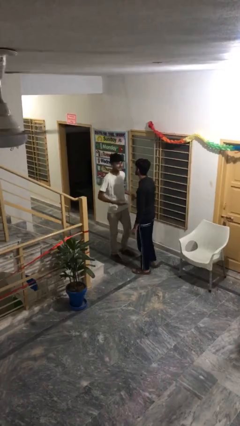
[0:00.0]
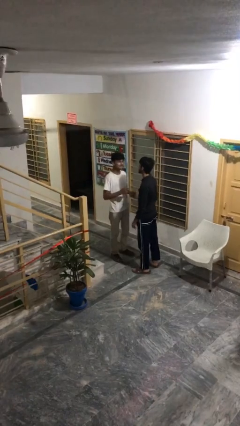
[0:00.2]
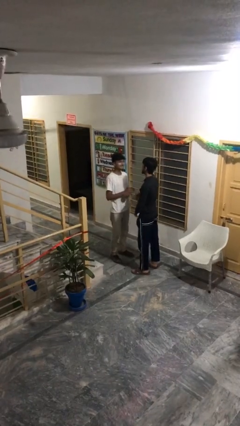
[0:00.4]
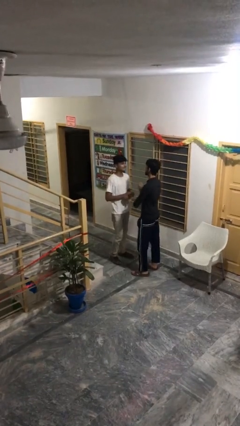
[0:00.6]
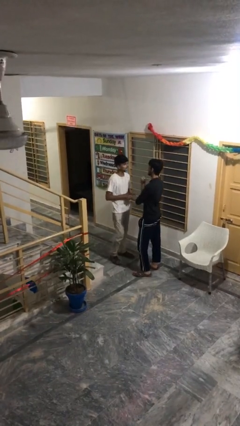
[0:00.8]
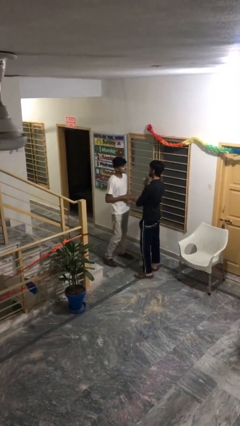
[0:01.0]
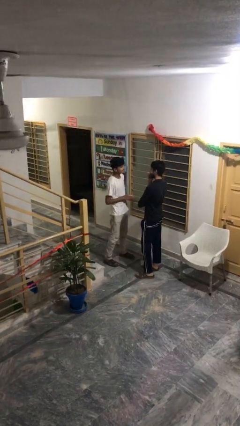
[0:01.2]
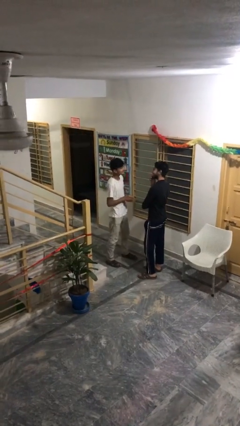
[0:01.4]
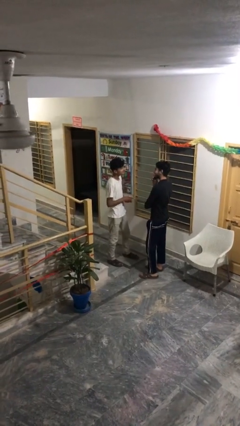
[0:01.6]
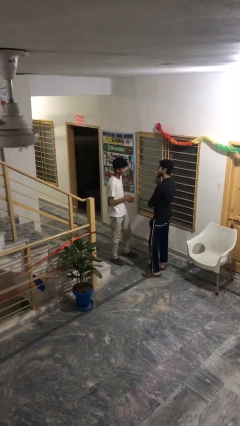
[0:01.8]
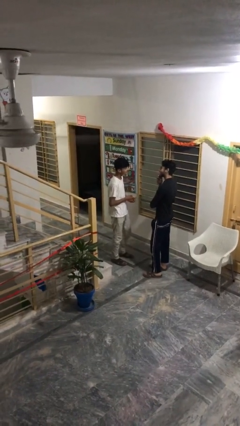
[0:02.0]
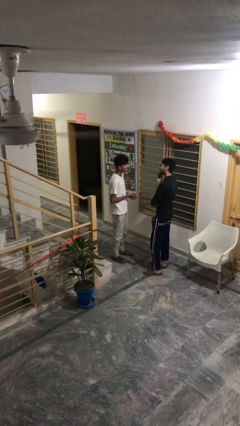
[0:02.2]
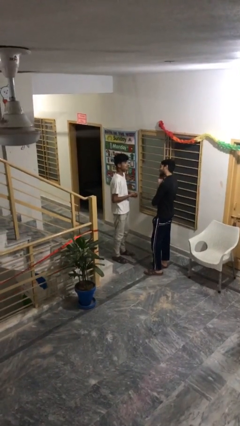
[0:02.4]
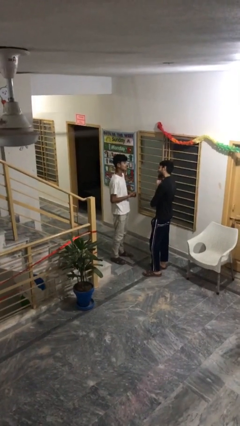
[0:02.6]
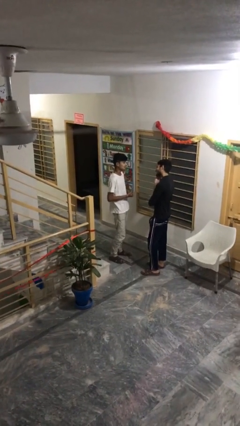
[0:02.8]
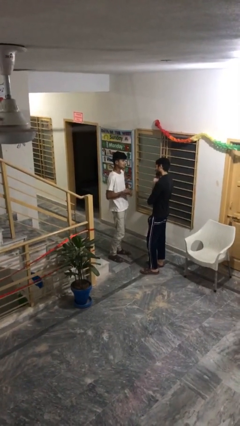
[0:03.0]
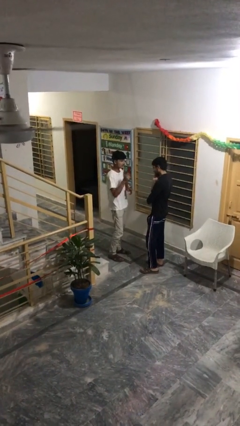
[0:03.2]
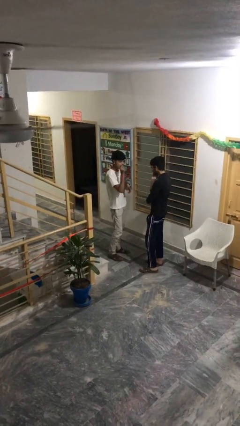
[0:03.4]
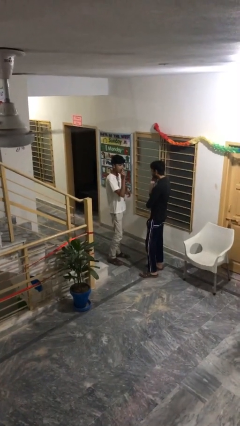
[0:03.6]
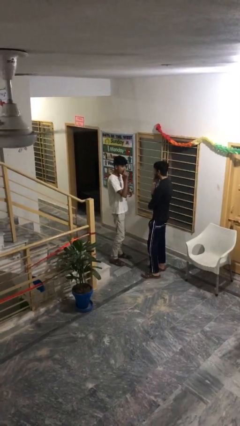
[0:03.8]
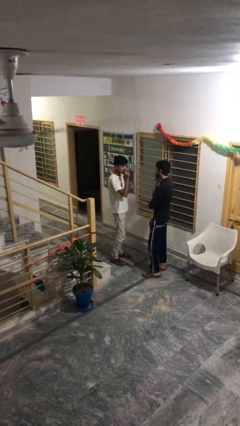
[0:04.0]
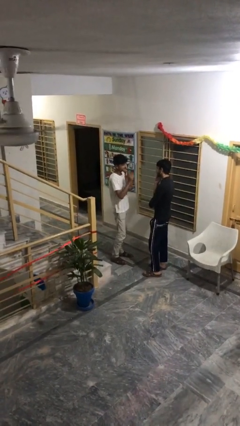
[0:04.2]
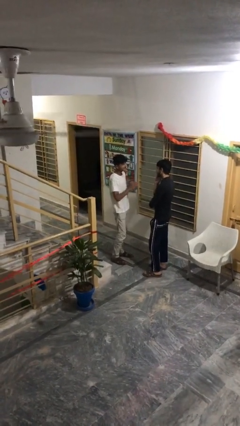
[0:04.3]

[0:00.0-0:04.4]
person talks to person

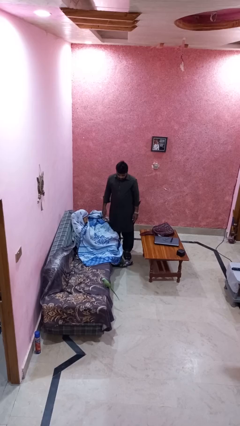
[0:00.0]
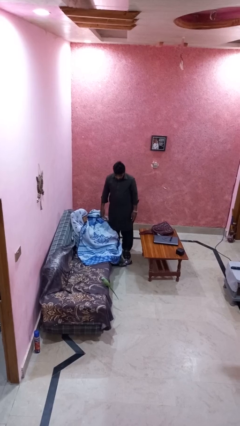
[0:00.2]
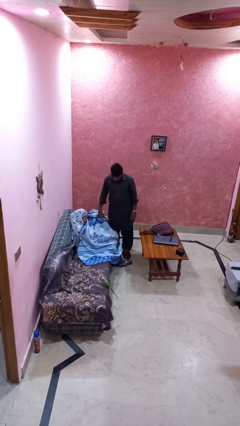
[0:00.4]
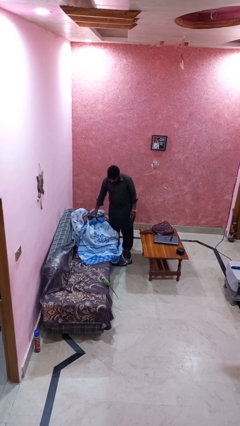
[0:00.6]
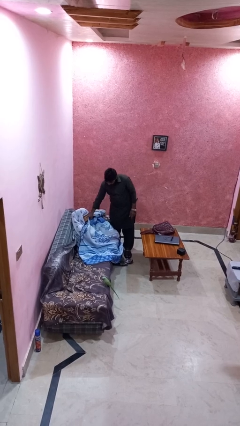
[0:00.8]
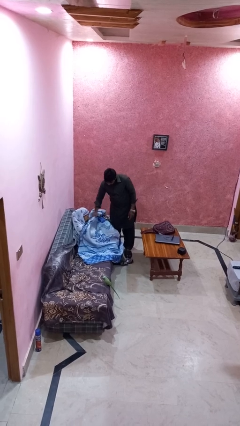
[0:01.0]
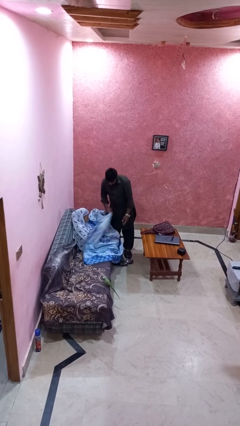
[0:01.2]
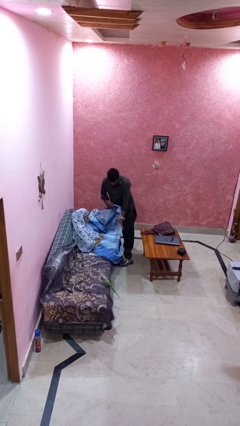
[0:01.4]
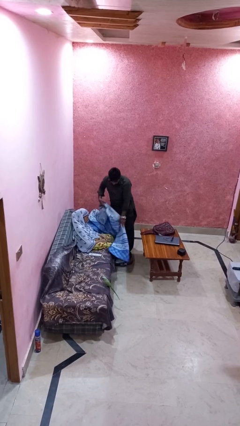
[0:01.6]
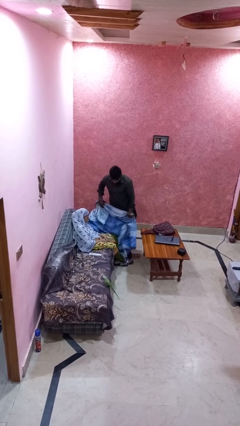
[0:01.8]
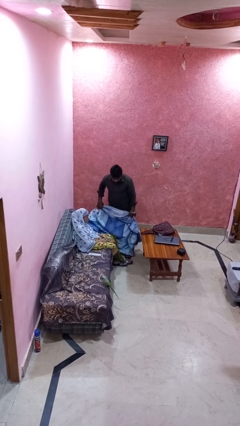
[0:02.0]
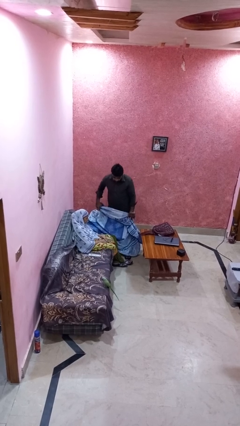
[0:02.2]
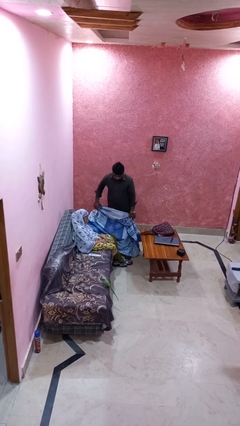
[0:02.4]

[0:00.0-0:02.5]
person uncovers friend with blanket

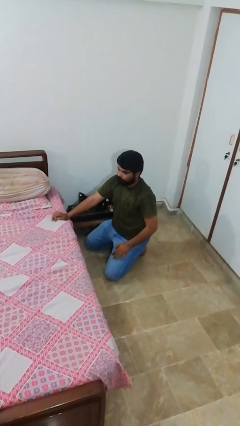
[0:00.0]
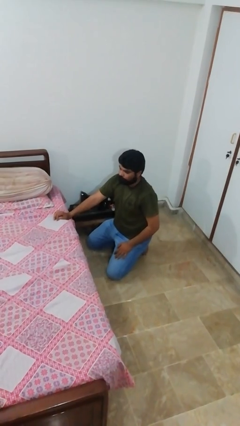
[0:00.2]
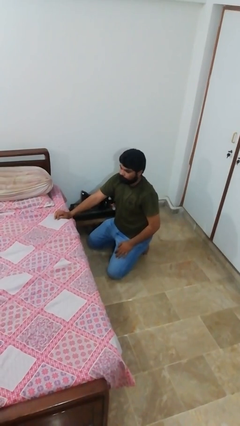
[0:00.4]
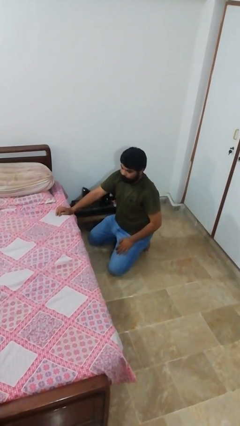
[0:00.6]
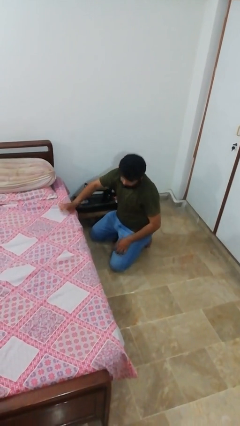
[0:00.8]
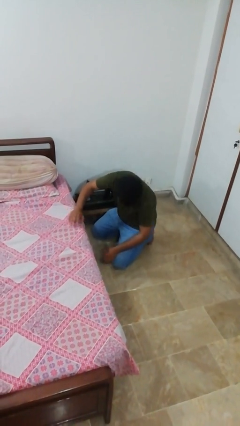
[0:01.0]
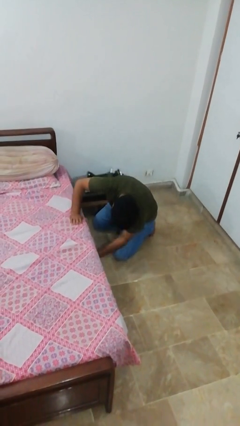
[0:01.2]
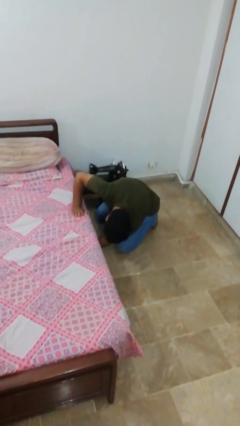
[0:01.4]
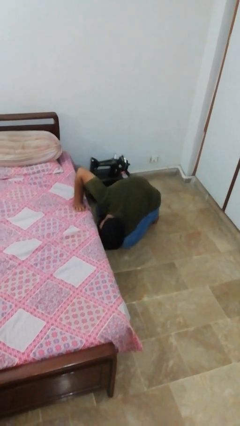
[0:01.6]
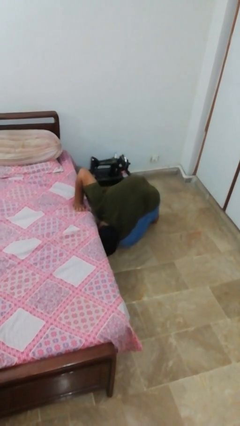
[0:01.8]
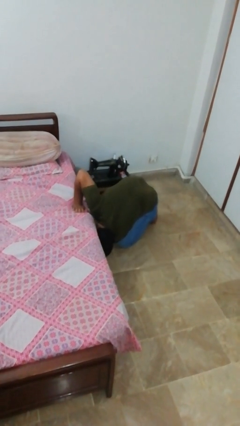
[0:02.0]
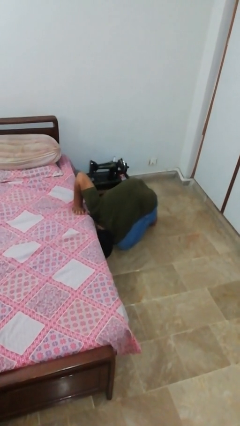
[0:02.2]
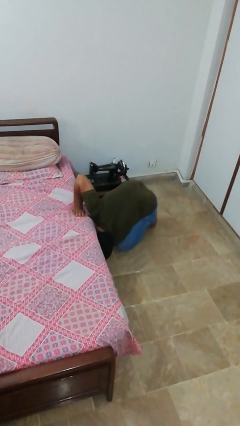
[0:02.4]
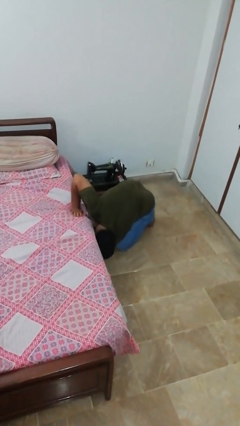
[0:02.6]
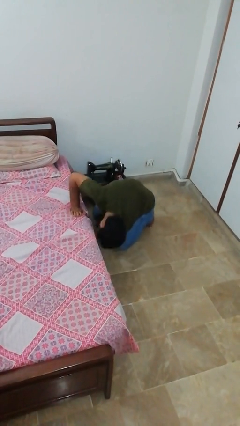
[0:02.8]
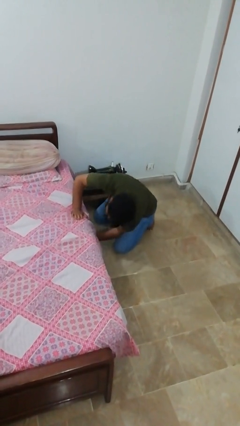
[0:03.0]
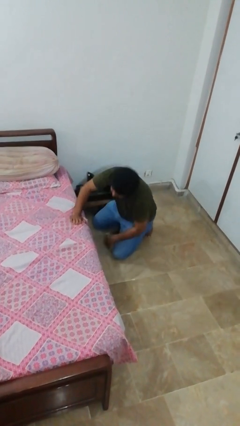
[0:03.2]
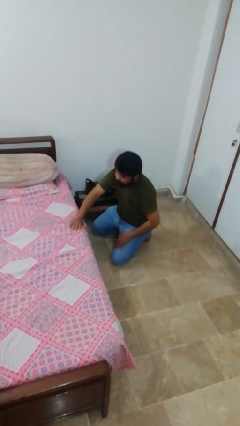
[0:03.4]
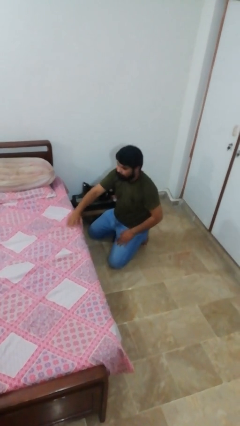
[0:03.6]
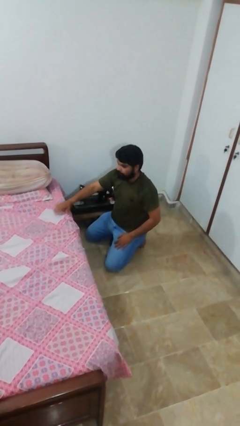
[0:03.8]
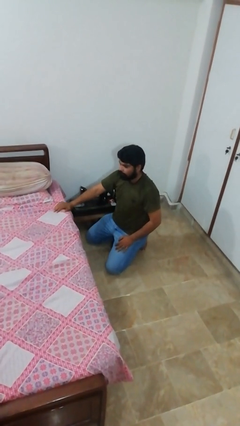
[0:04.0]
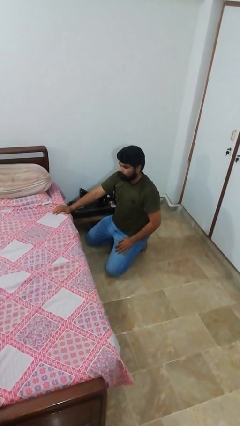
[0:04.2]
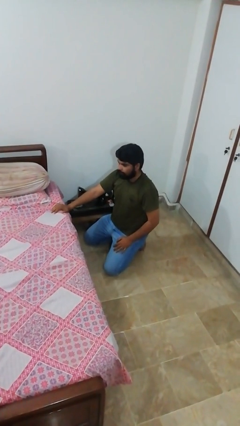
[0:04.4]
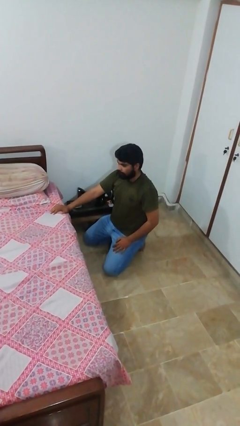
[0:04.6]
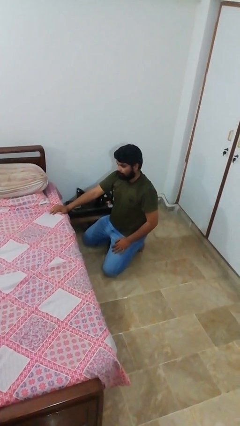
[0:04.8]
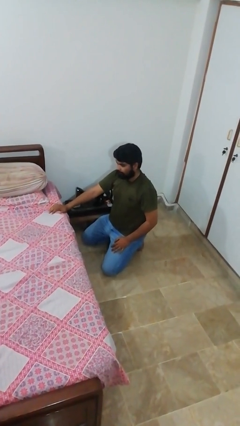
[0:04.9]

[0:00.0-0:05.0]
person searches under bed

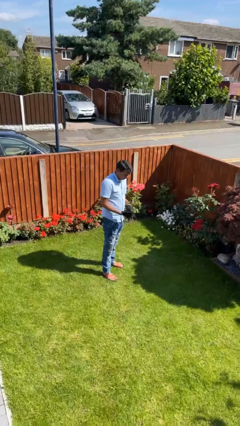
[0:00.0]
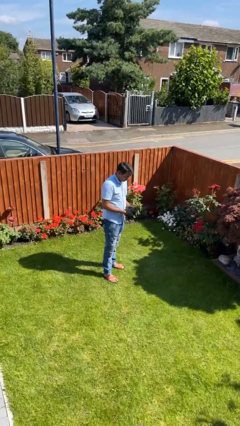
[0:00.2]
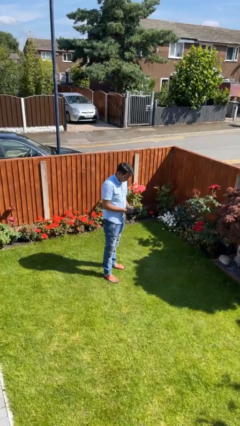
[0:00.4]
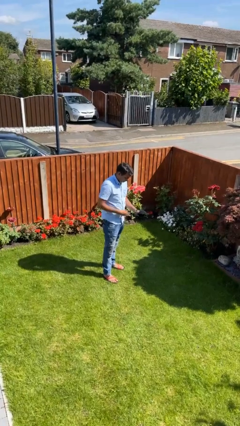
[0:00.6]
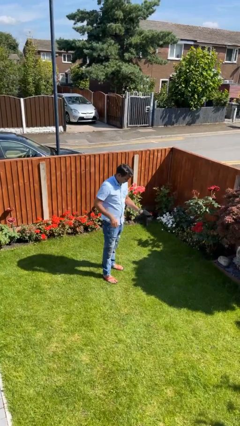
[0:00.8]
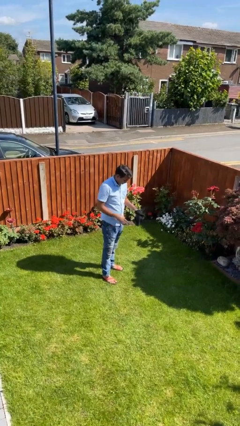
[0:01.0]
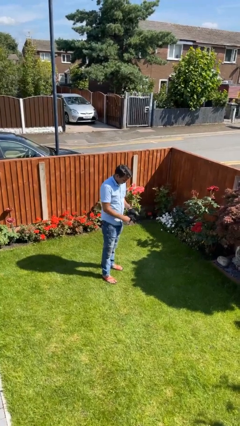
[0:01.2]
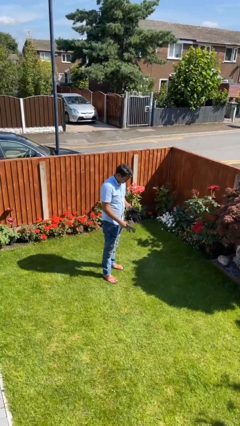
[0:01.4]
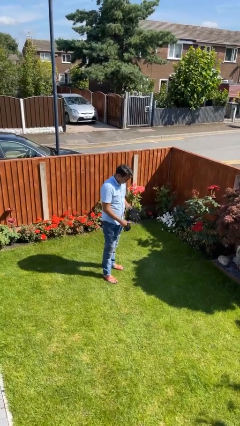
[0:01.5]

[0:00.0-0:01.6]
person takes off gloves

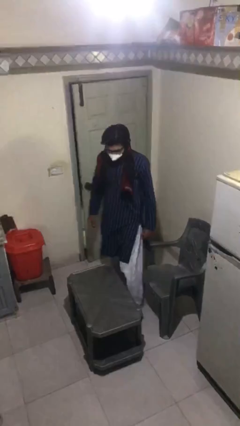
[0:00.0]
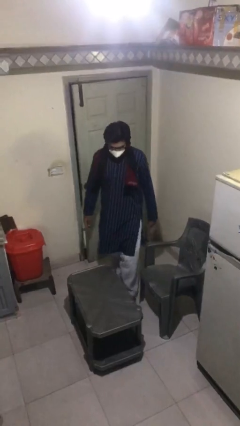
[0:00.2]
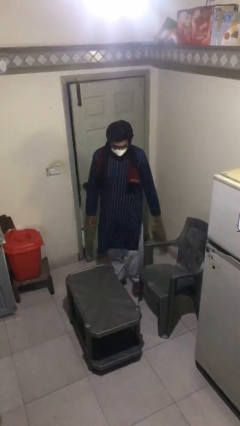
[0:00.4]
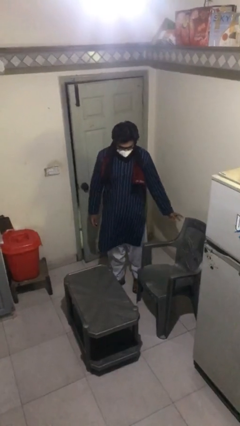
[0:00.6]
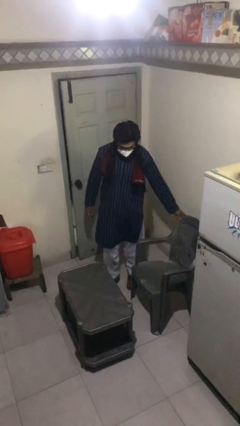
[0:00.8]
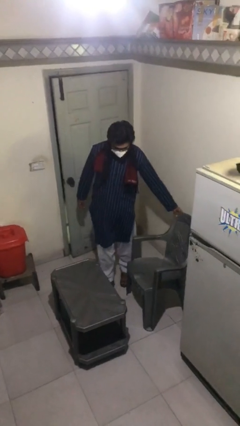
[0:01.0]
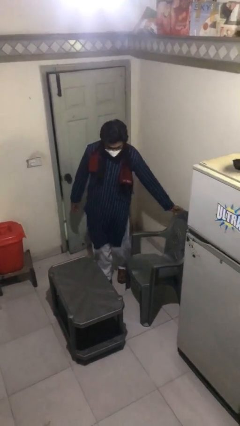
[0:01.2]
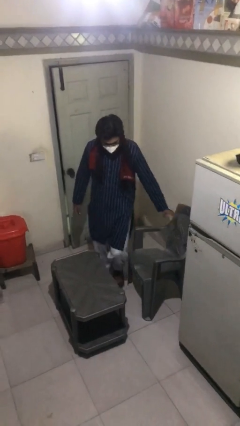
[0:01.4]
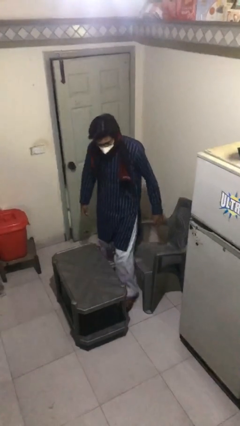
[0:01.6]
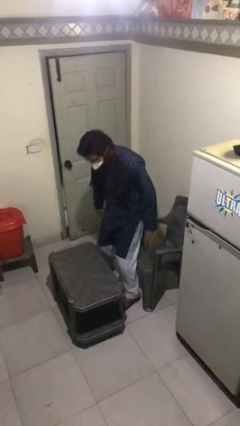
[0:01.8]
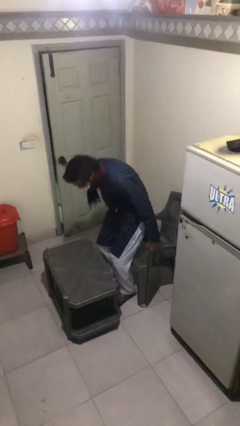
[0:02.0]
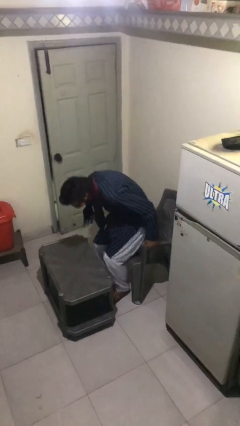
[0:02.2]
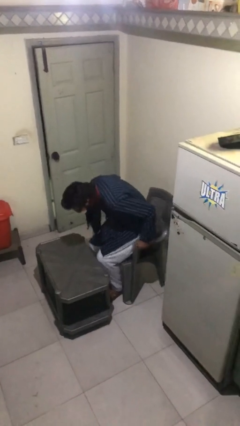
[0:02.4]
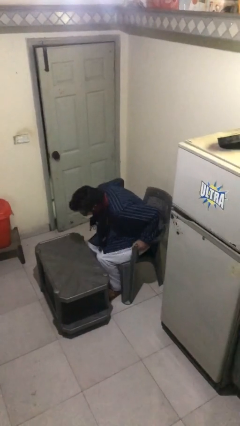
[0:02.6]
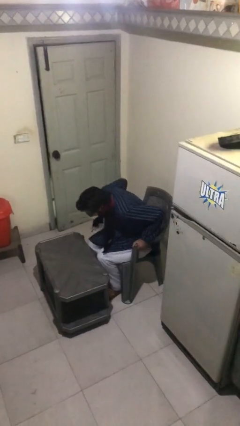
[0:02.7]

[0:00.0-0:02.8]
person sits down

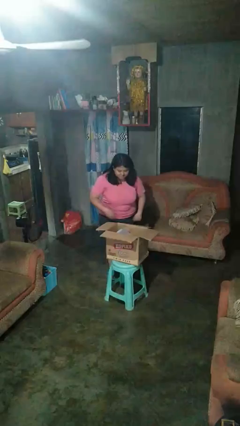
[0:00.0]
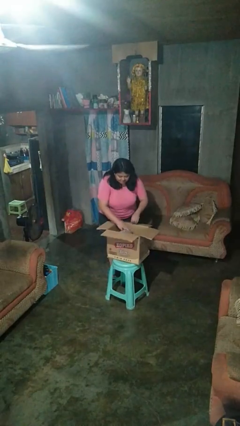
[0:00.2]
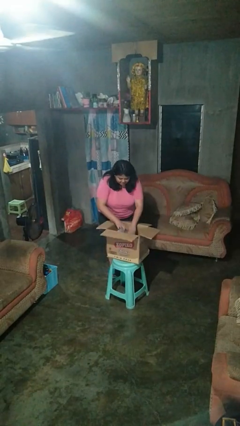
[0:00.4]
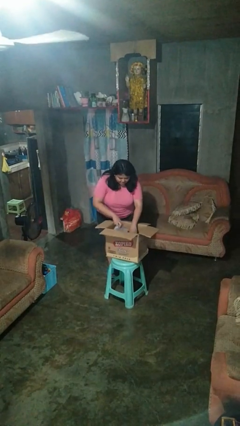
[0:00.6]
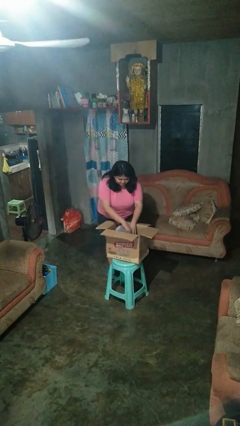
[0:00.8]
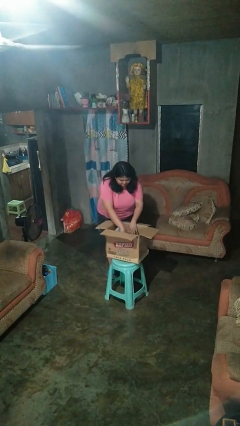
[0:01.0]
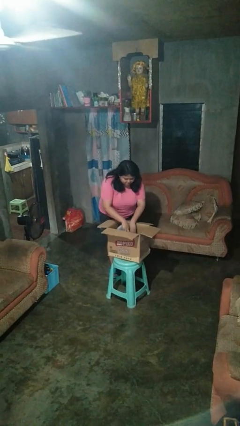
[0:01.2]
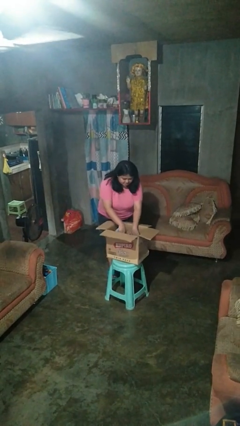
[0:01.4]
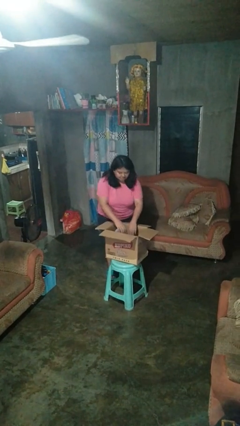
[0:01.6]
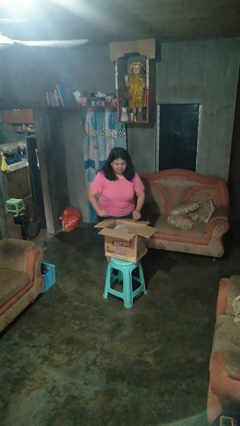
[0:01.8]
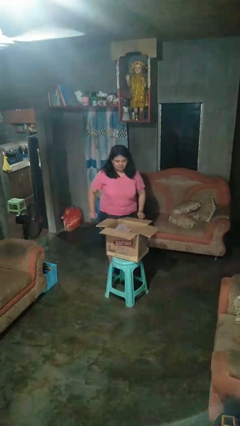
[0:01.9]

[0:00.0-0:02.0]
person searches in box
